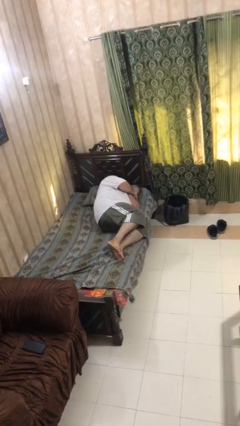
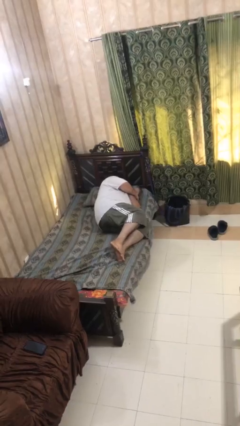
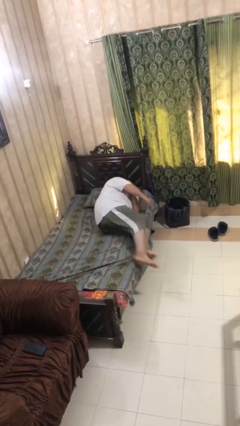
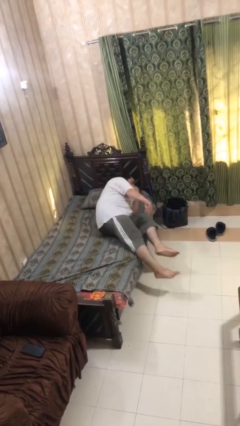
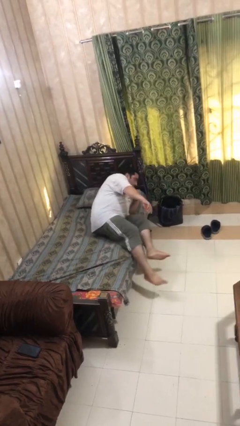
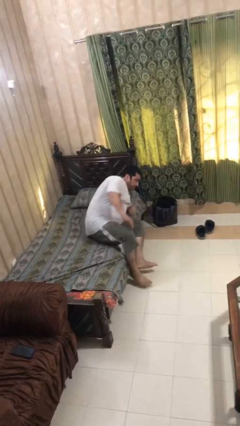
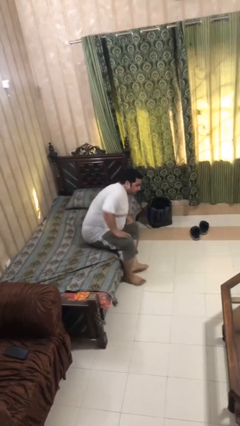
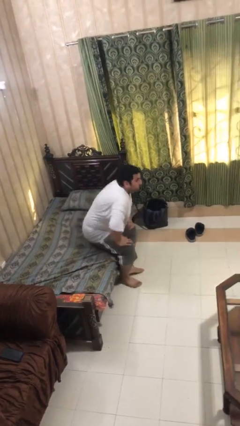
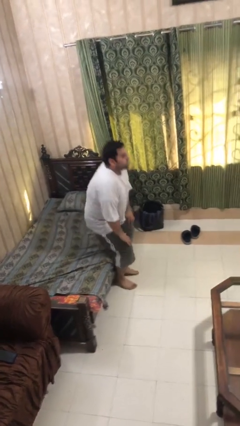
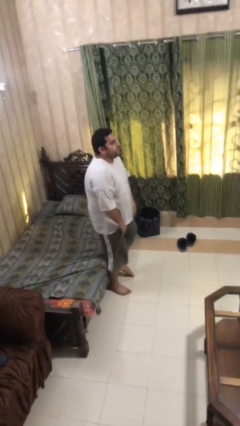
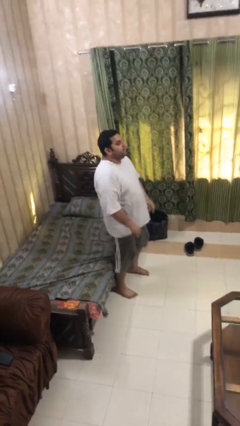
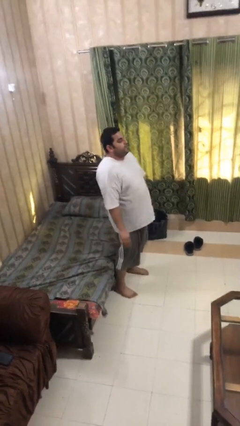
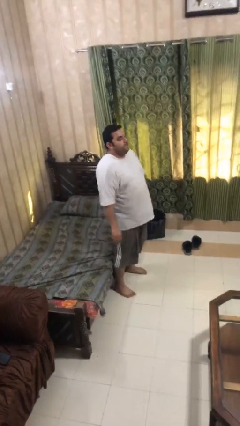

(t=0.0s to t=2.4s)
person stands up

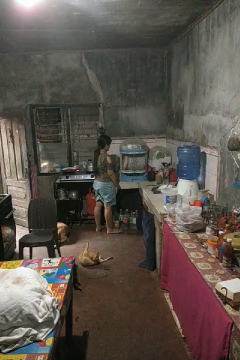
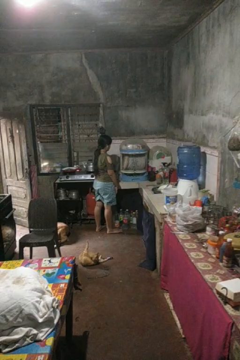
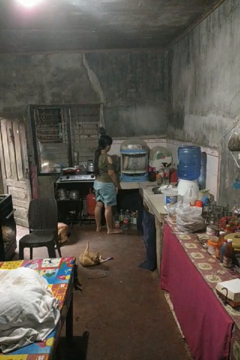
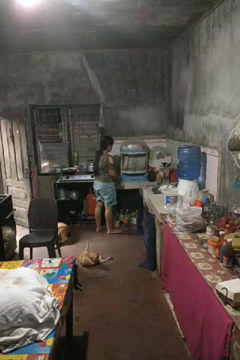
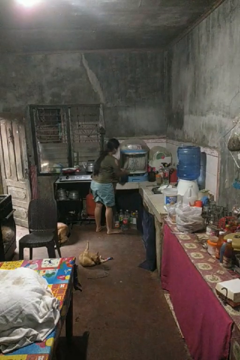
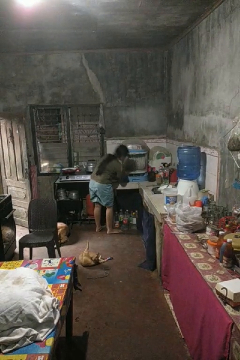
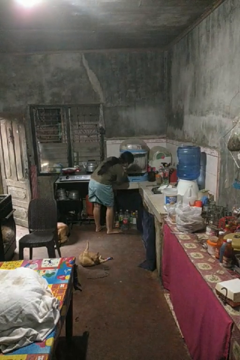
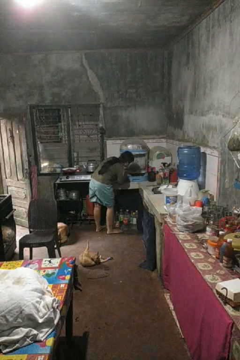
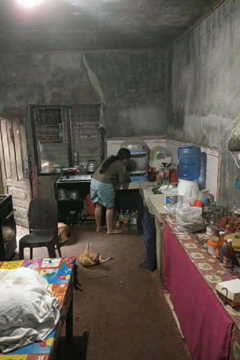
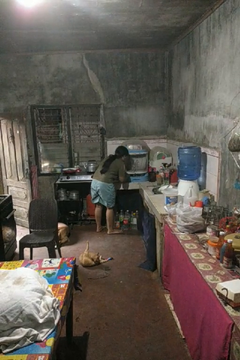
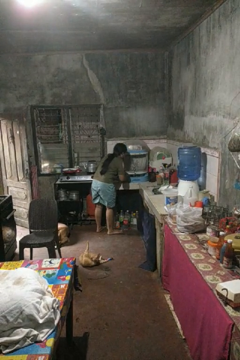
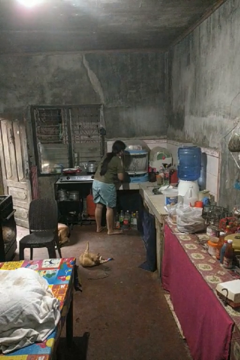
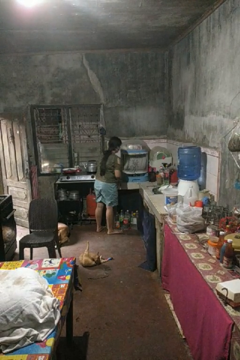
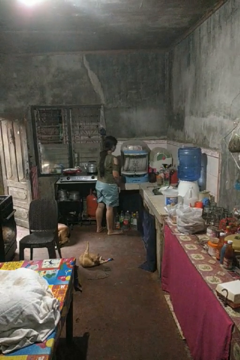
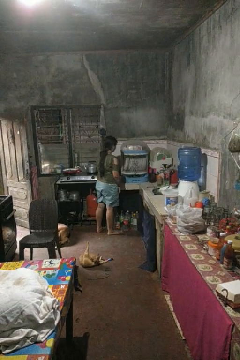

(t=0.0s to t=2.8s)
person searches in kitchen drawer

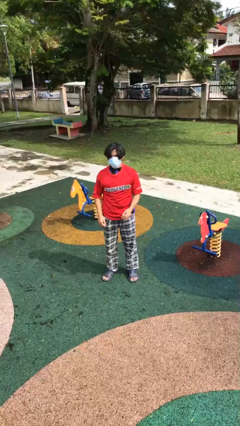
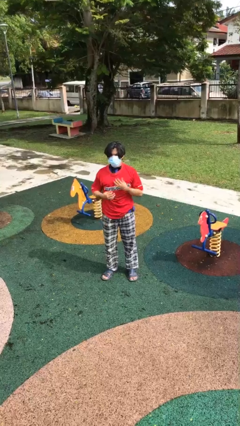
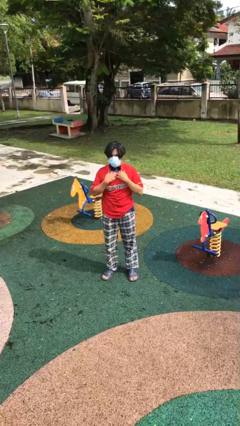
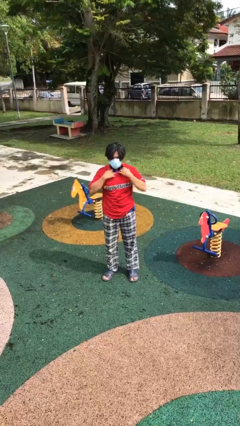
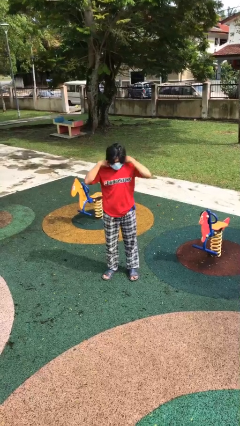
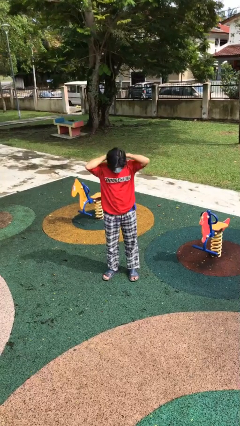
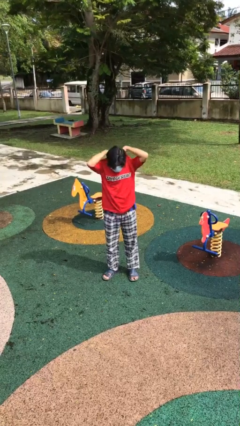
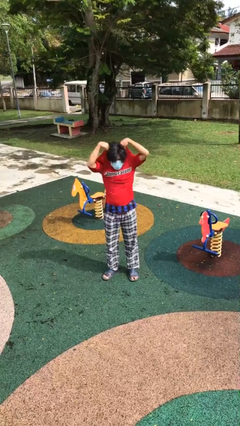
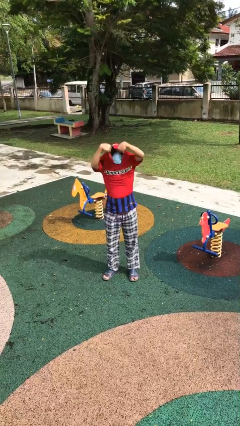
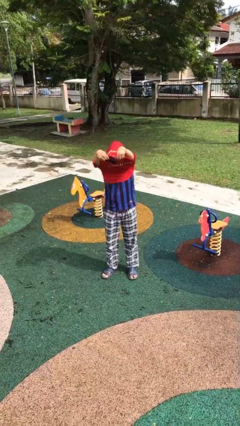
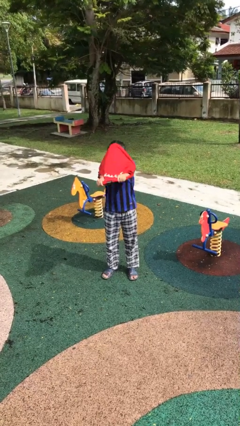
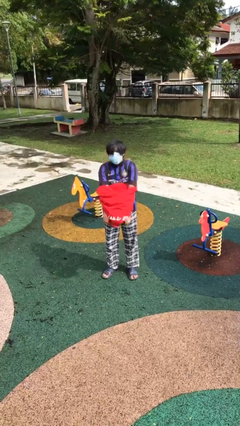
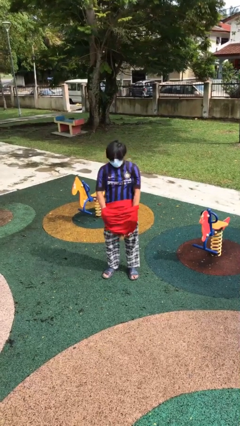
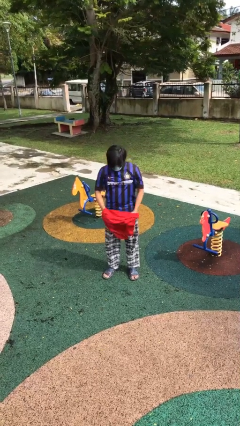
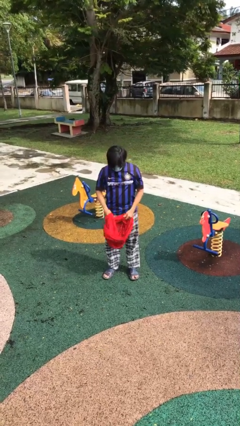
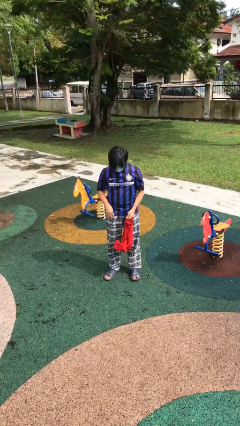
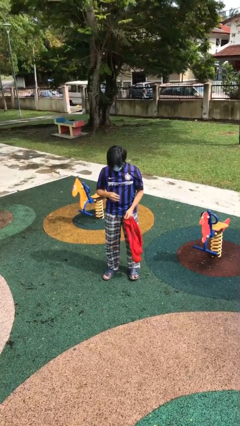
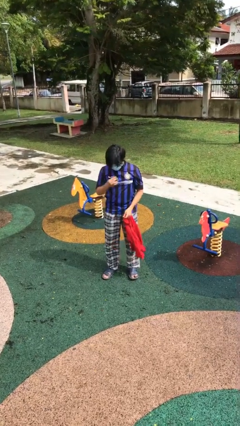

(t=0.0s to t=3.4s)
person takes off shirt

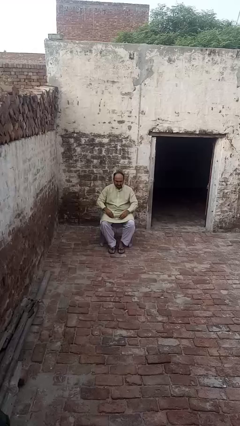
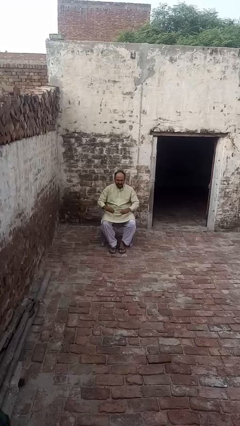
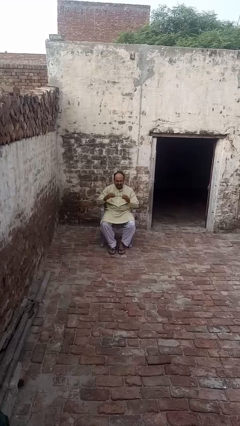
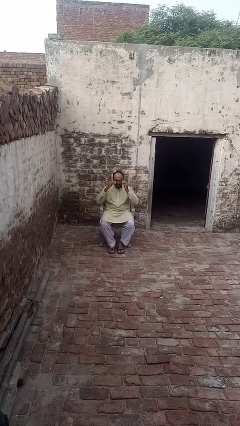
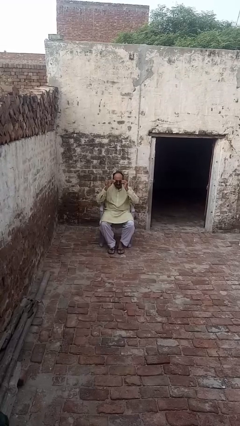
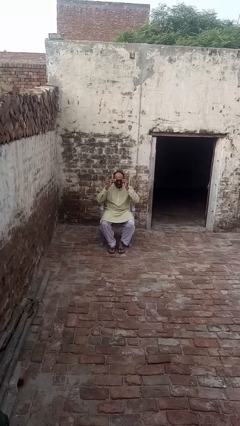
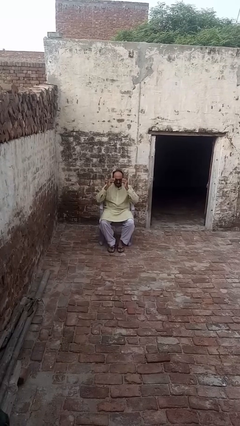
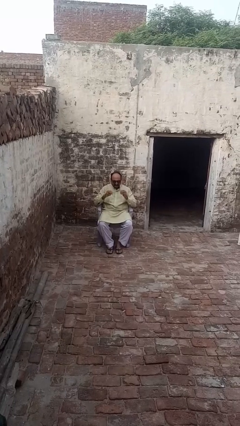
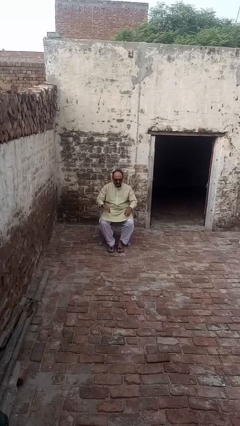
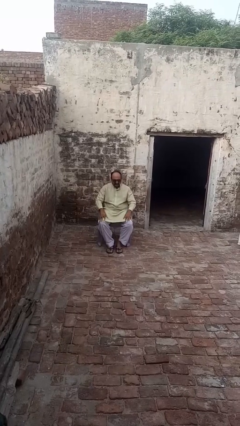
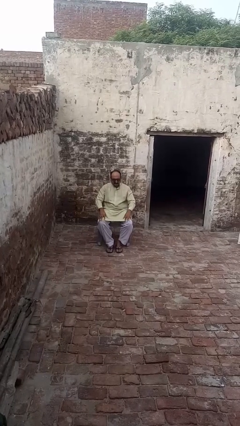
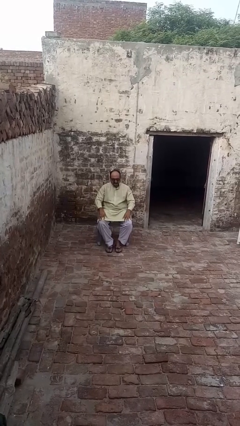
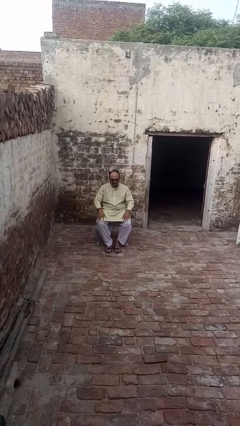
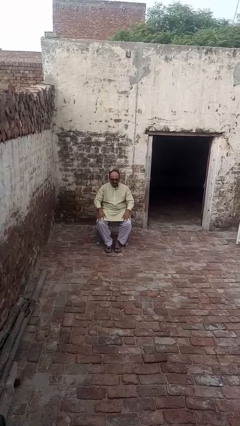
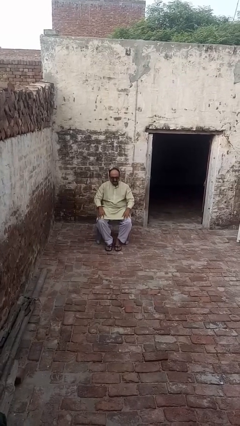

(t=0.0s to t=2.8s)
person puts on sunglasses

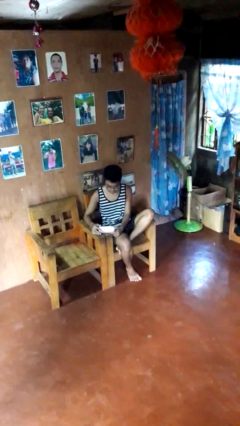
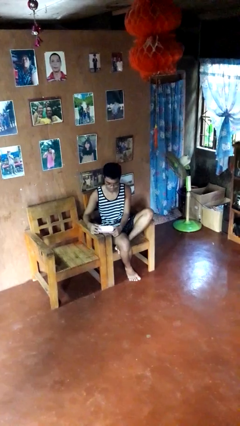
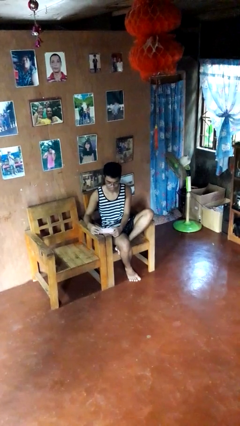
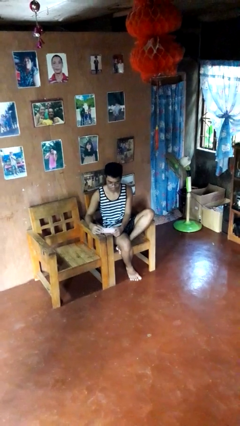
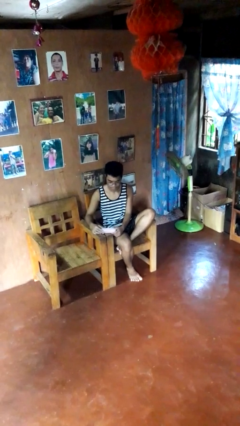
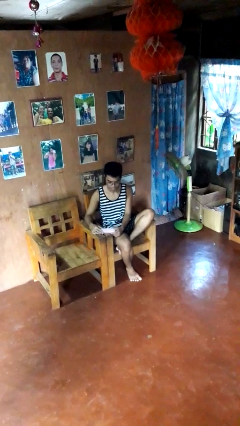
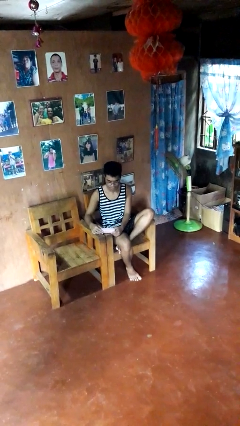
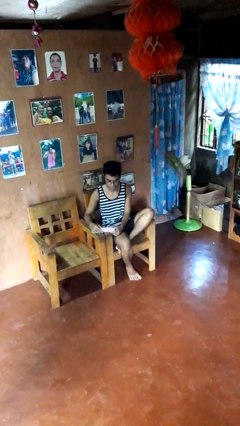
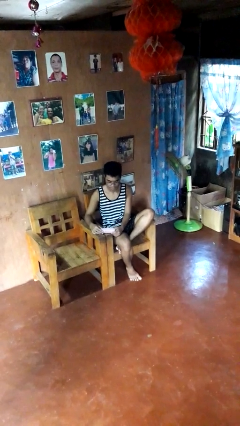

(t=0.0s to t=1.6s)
person closes jewelry box

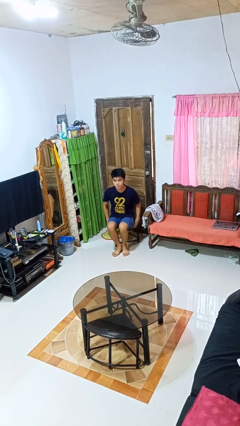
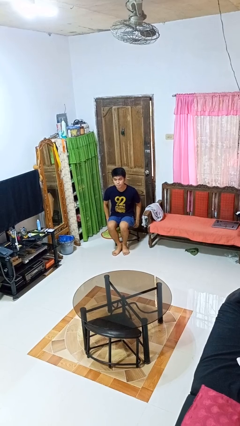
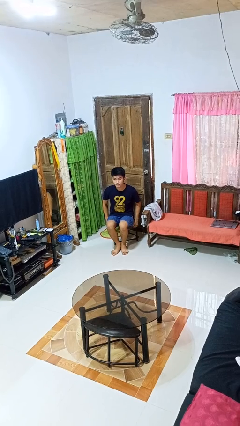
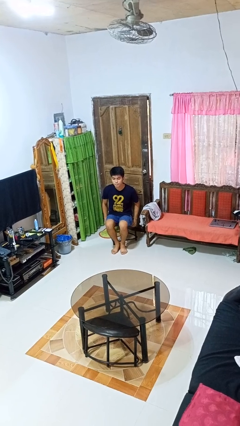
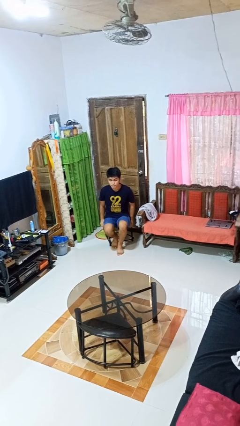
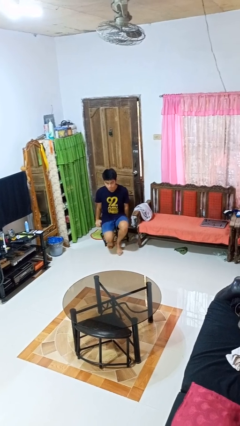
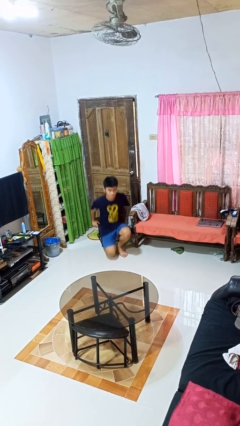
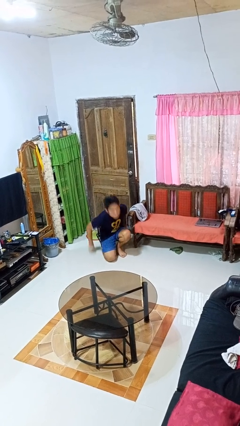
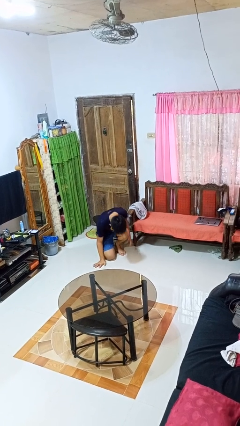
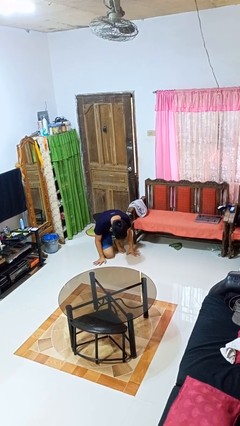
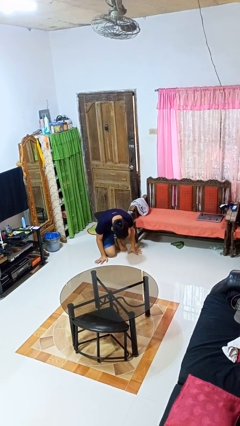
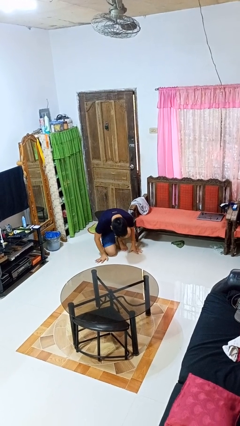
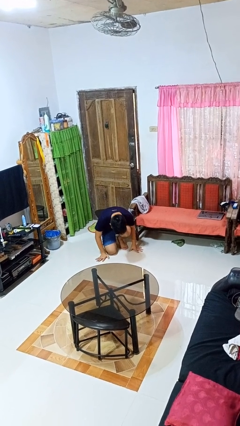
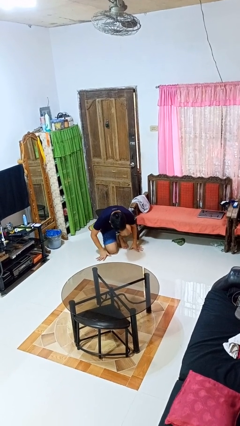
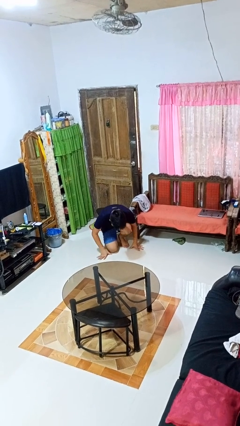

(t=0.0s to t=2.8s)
person falls from chair

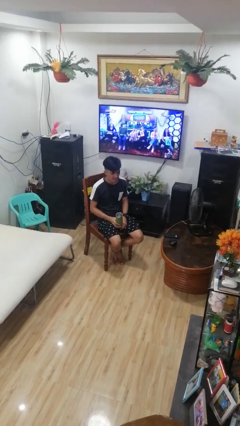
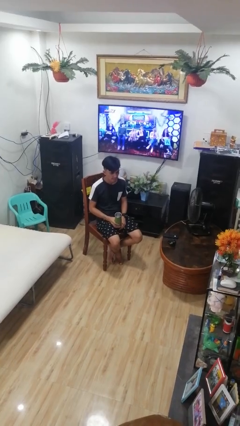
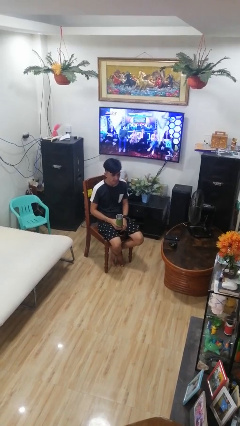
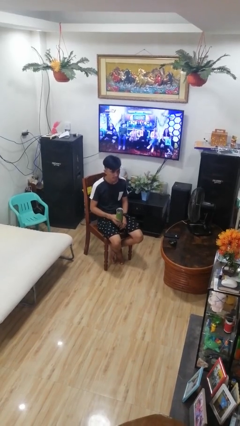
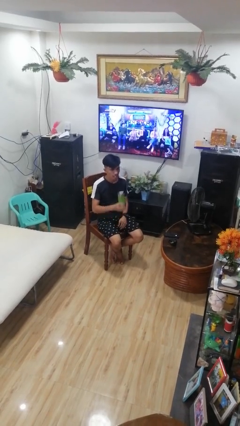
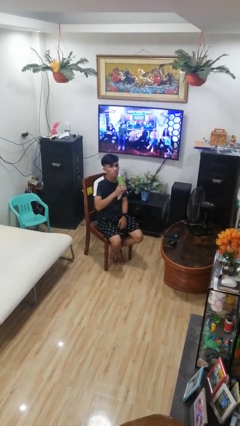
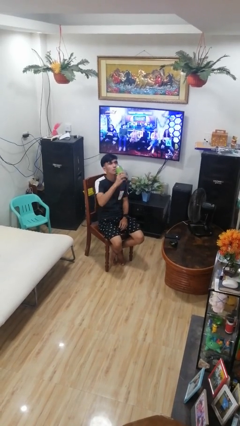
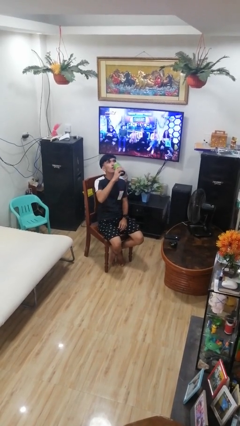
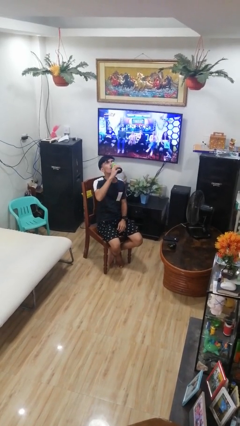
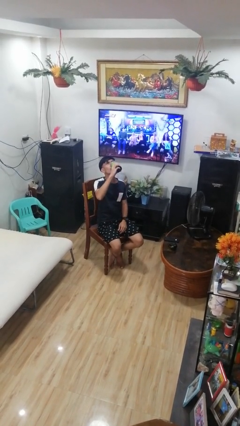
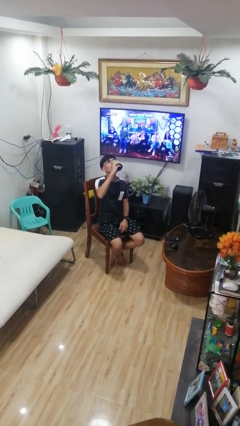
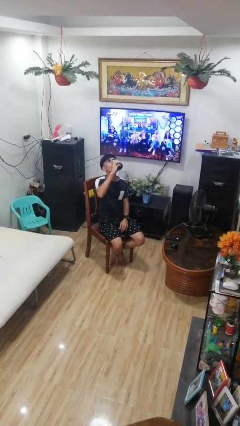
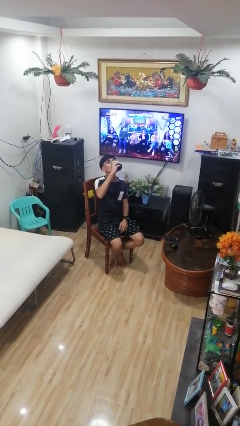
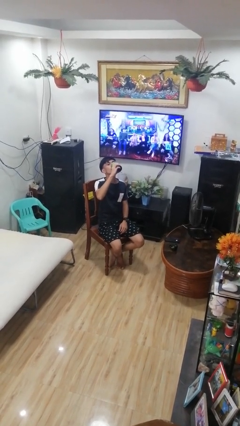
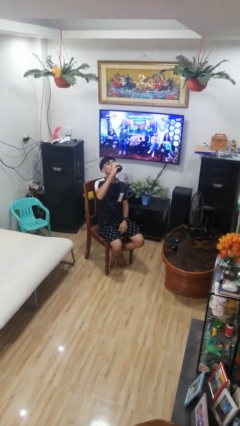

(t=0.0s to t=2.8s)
person drinks from bottle
